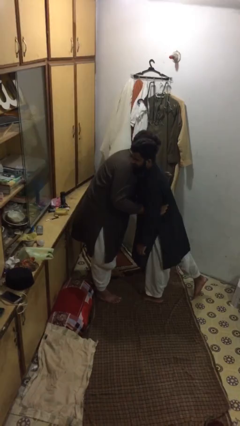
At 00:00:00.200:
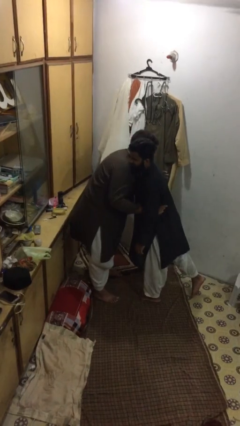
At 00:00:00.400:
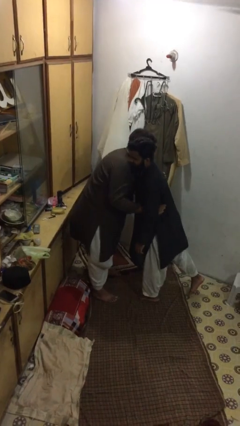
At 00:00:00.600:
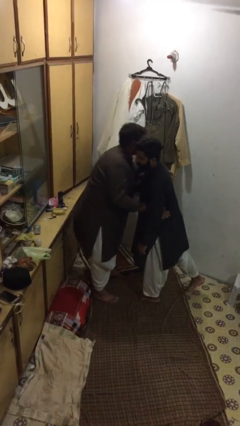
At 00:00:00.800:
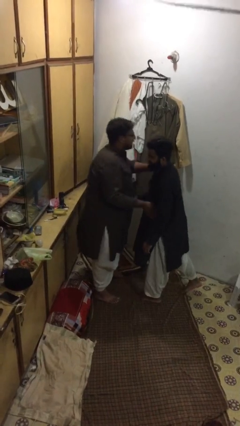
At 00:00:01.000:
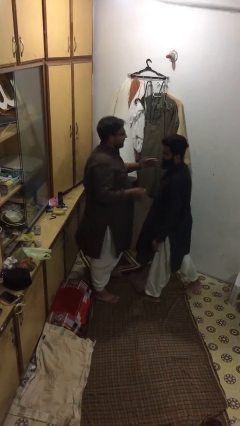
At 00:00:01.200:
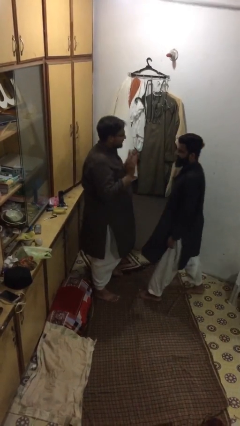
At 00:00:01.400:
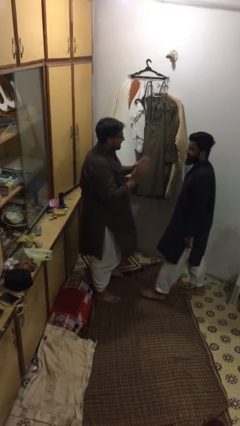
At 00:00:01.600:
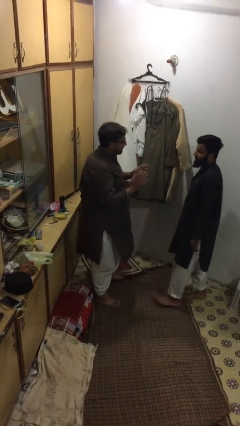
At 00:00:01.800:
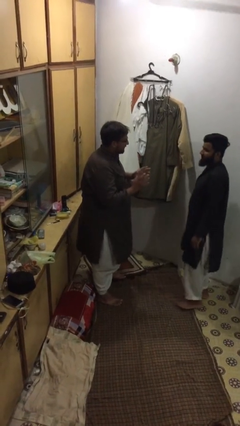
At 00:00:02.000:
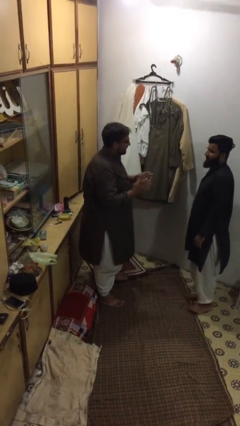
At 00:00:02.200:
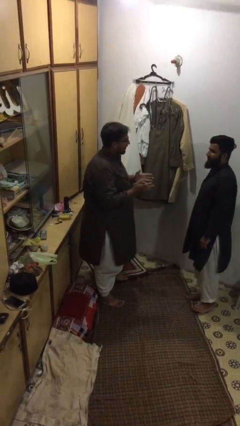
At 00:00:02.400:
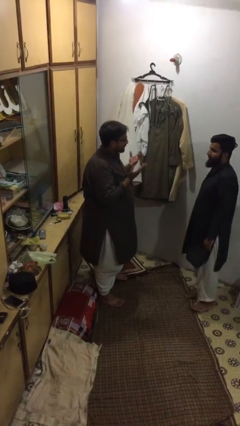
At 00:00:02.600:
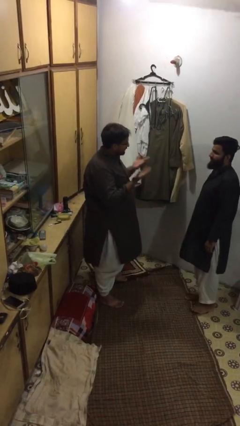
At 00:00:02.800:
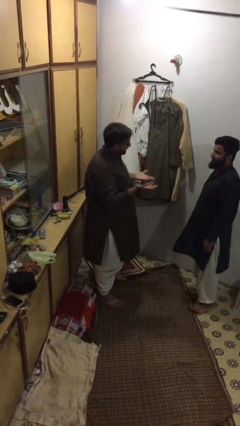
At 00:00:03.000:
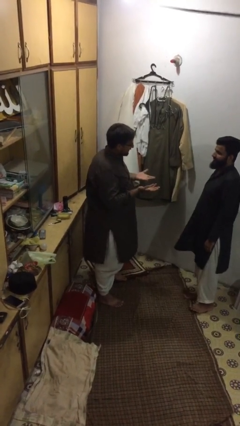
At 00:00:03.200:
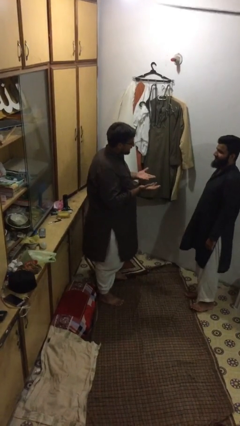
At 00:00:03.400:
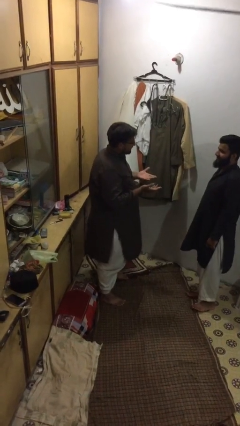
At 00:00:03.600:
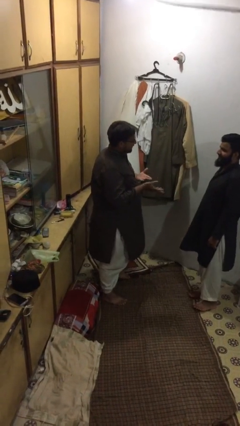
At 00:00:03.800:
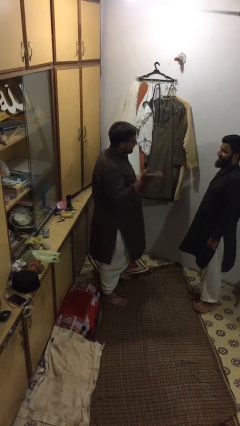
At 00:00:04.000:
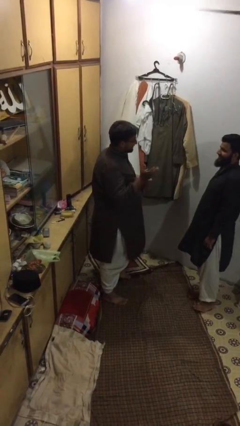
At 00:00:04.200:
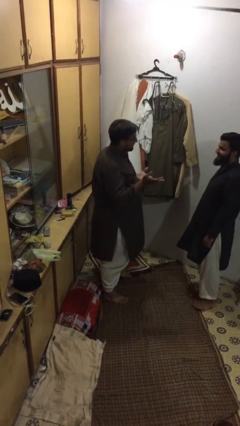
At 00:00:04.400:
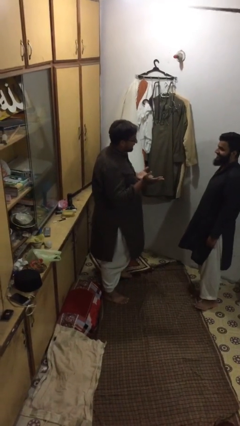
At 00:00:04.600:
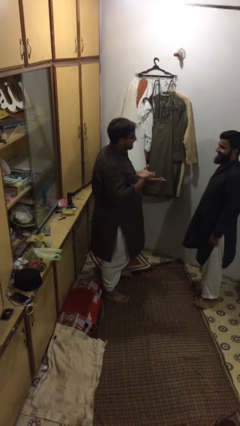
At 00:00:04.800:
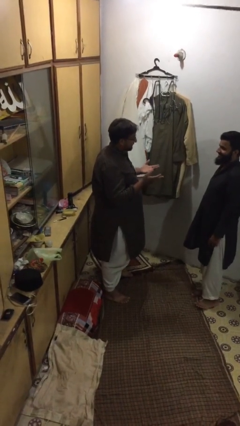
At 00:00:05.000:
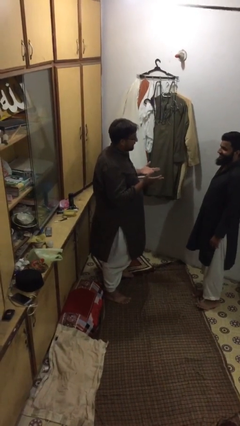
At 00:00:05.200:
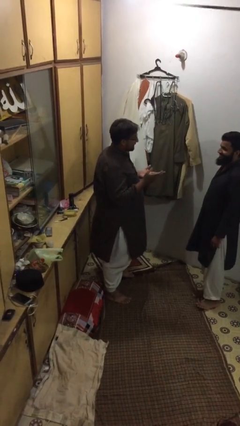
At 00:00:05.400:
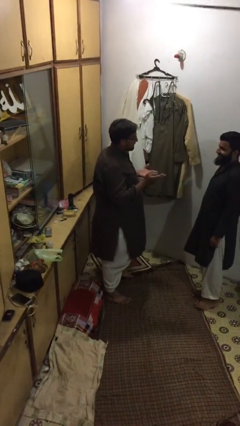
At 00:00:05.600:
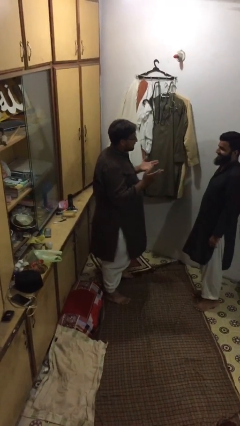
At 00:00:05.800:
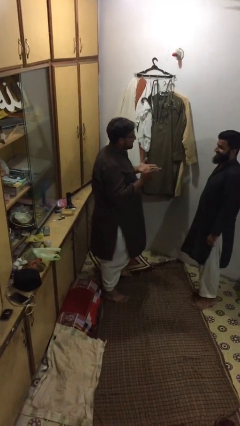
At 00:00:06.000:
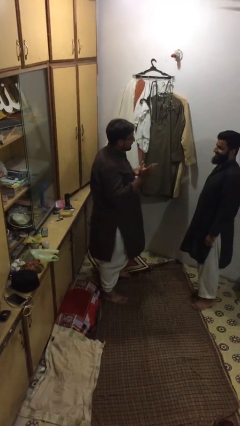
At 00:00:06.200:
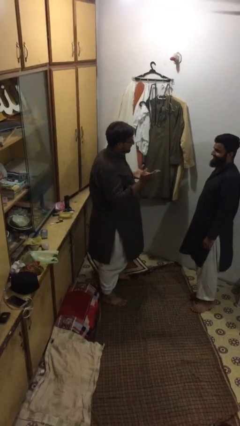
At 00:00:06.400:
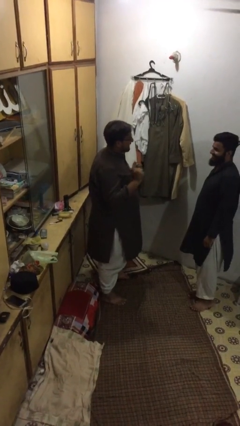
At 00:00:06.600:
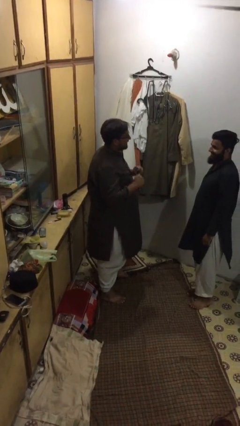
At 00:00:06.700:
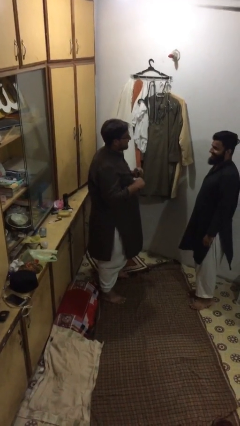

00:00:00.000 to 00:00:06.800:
person talks to person

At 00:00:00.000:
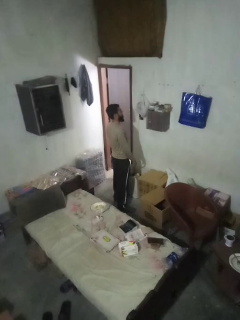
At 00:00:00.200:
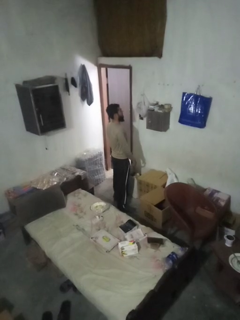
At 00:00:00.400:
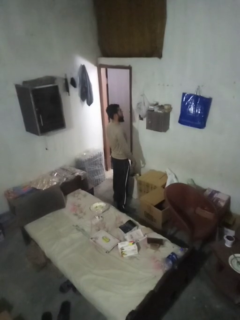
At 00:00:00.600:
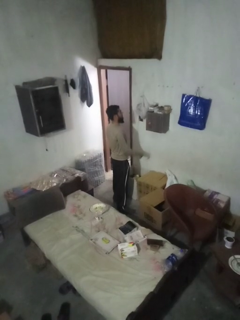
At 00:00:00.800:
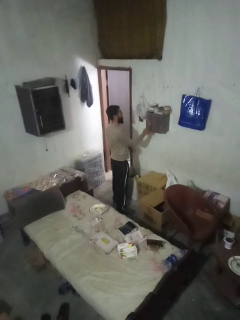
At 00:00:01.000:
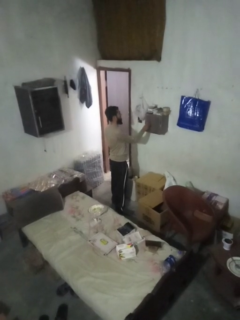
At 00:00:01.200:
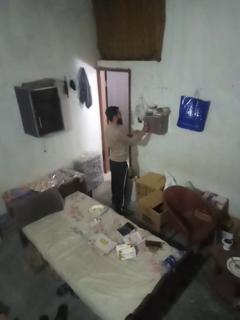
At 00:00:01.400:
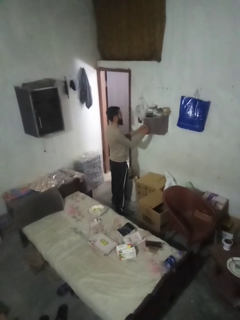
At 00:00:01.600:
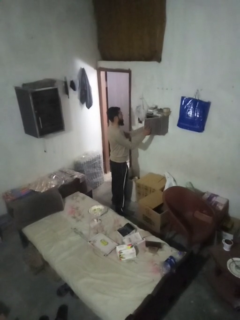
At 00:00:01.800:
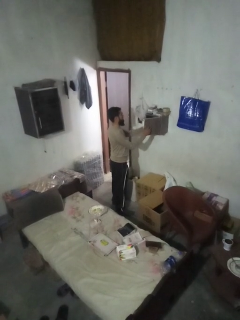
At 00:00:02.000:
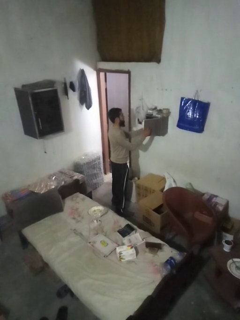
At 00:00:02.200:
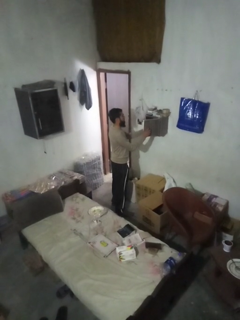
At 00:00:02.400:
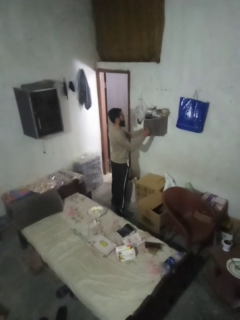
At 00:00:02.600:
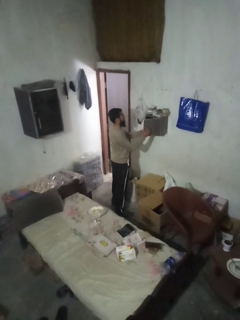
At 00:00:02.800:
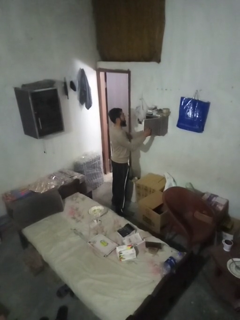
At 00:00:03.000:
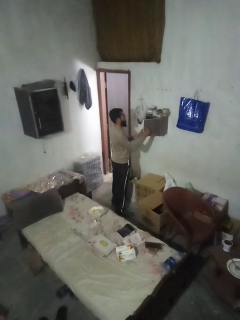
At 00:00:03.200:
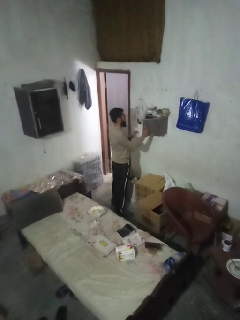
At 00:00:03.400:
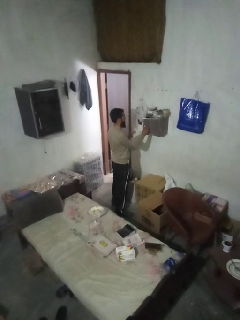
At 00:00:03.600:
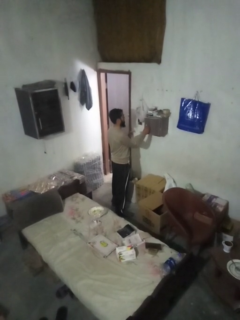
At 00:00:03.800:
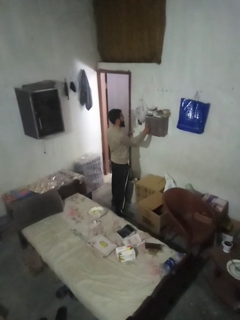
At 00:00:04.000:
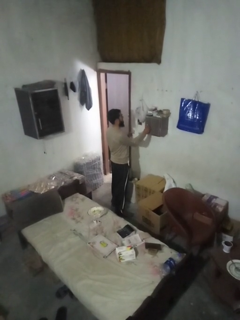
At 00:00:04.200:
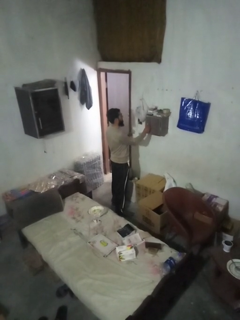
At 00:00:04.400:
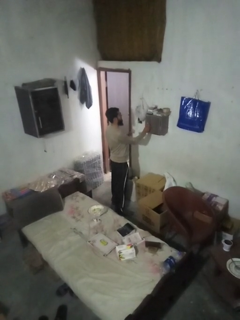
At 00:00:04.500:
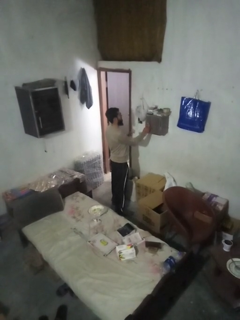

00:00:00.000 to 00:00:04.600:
person takes letters from mailbox

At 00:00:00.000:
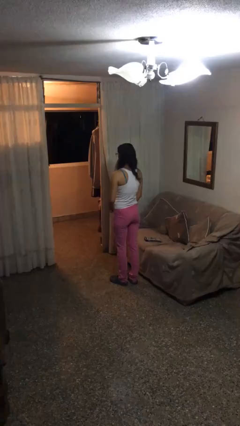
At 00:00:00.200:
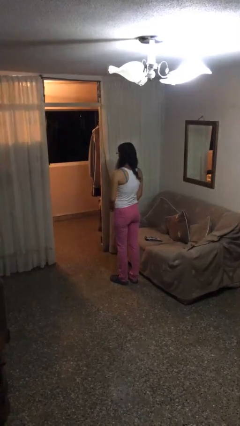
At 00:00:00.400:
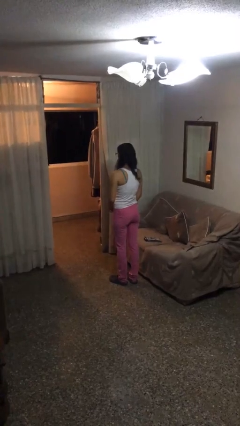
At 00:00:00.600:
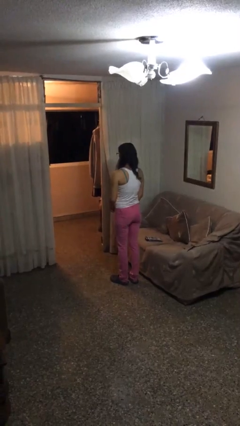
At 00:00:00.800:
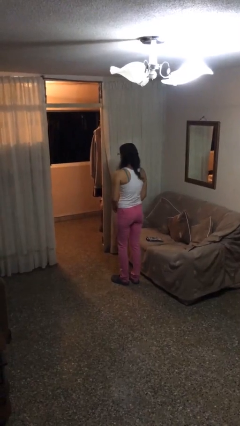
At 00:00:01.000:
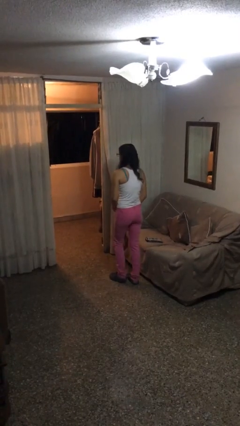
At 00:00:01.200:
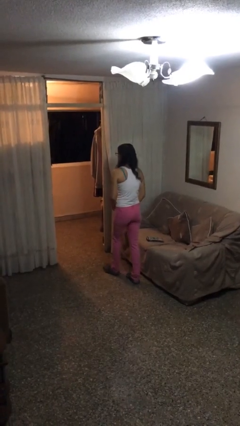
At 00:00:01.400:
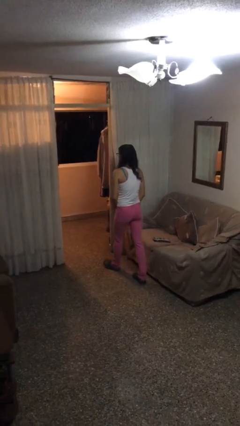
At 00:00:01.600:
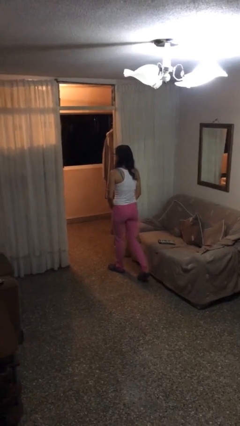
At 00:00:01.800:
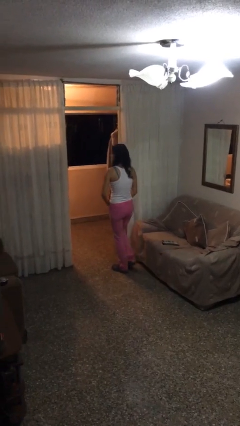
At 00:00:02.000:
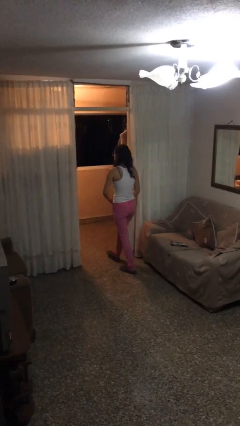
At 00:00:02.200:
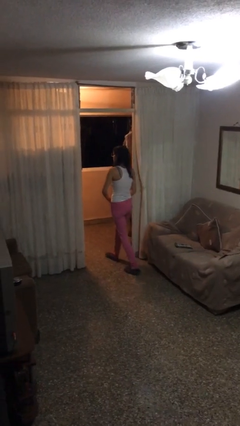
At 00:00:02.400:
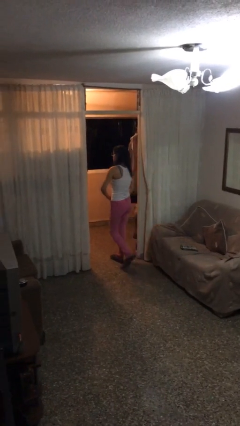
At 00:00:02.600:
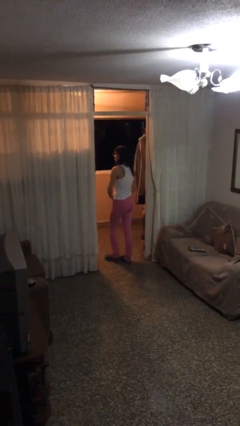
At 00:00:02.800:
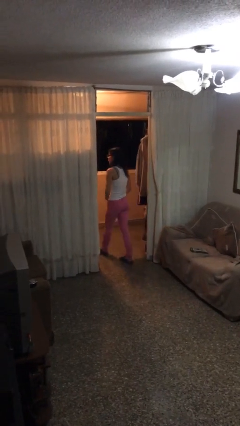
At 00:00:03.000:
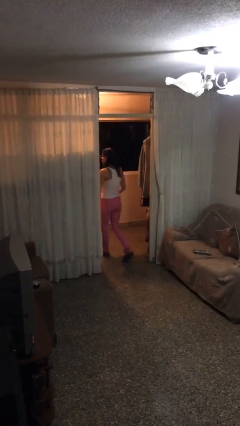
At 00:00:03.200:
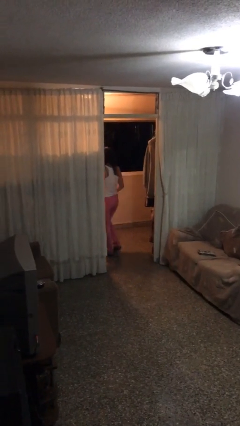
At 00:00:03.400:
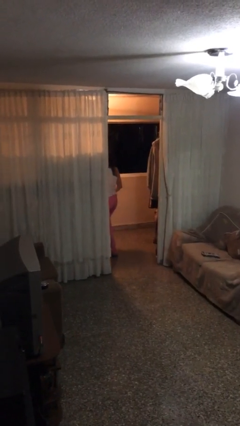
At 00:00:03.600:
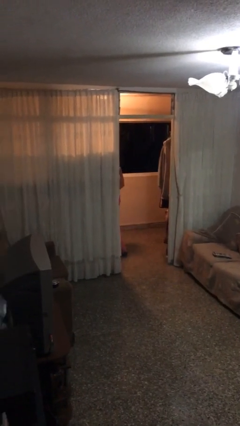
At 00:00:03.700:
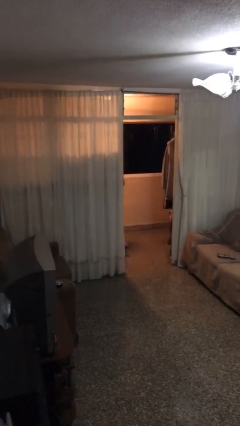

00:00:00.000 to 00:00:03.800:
person exits scene through structure

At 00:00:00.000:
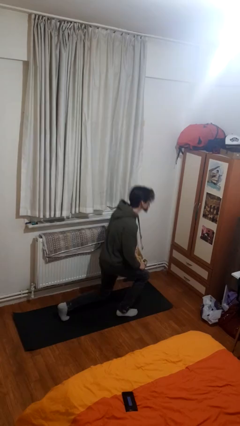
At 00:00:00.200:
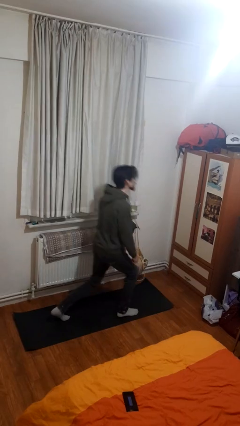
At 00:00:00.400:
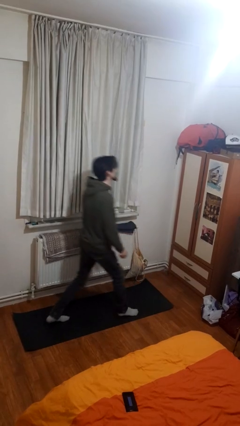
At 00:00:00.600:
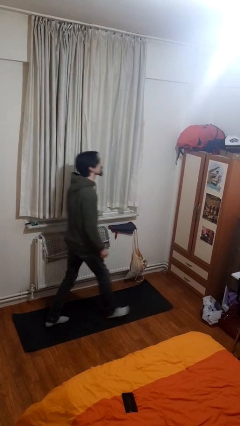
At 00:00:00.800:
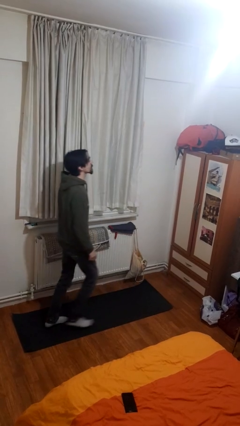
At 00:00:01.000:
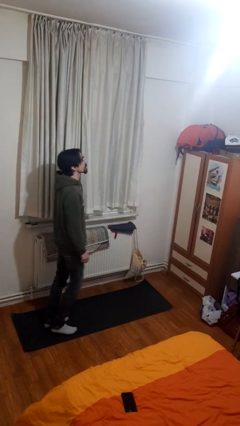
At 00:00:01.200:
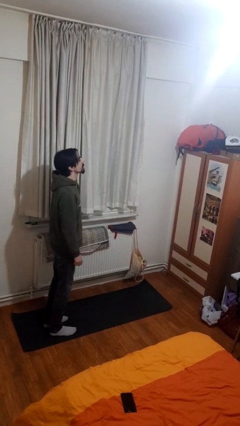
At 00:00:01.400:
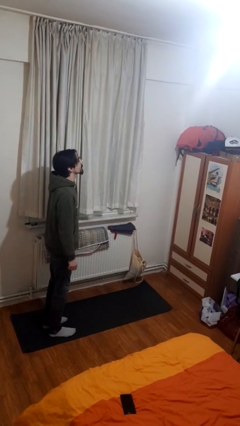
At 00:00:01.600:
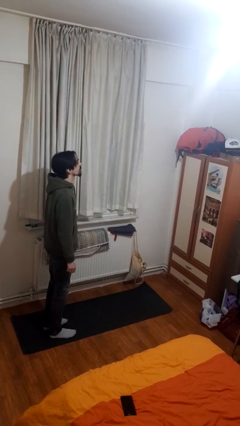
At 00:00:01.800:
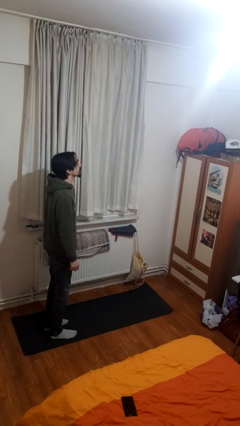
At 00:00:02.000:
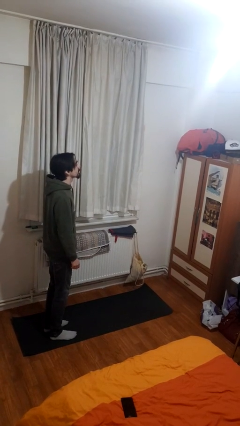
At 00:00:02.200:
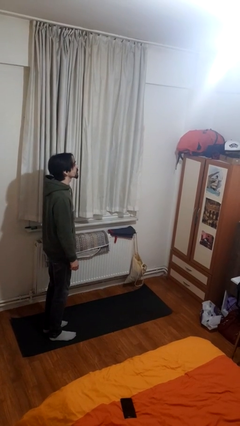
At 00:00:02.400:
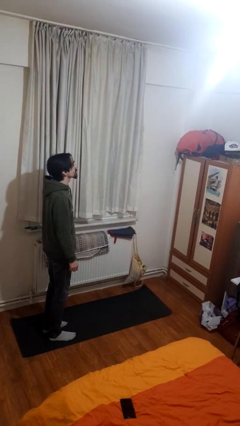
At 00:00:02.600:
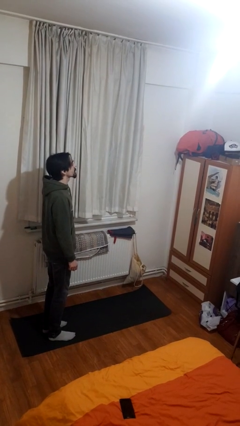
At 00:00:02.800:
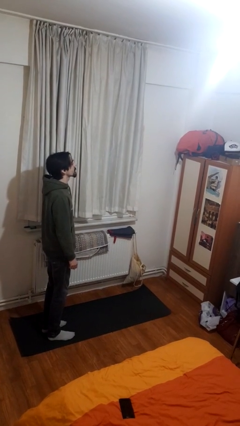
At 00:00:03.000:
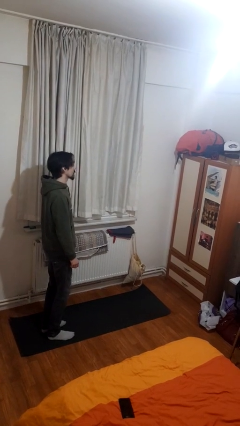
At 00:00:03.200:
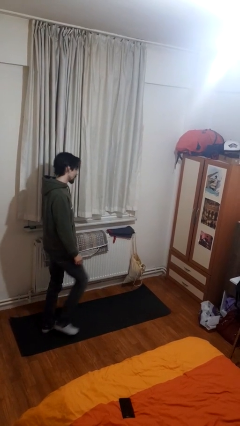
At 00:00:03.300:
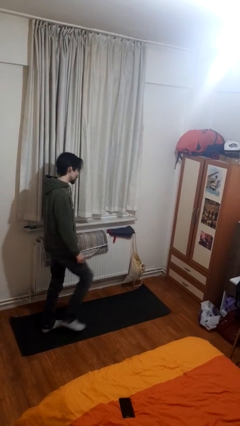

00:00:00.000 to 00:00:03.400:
person stands up from floor
